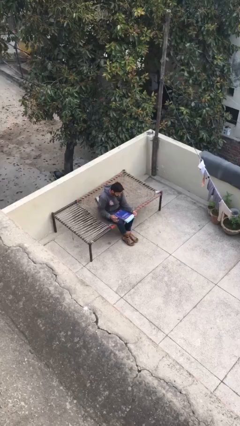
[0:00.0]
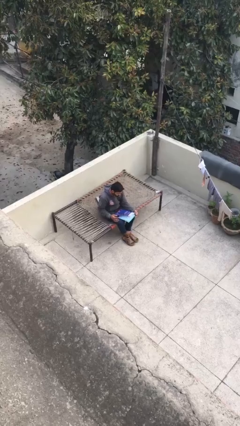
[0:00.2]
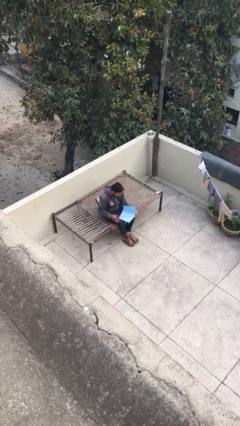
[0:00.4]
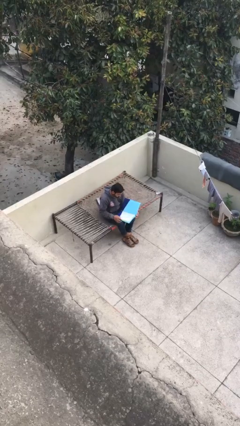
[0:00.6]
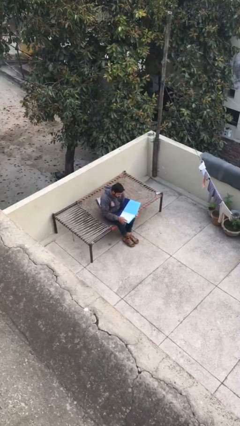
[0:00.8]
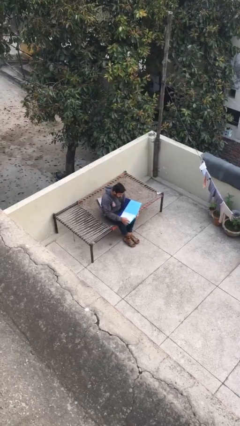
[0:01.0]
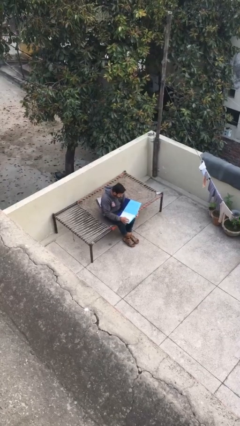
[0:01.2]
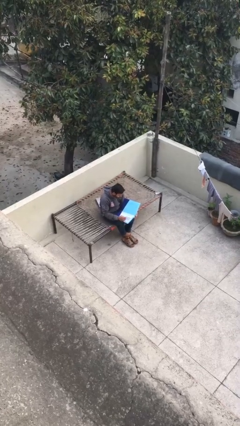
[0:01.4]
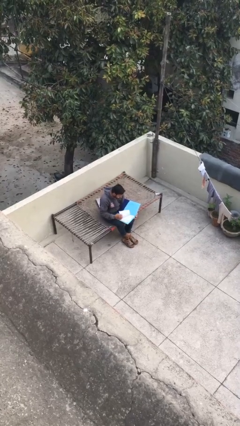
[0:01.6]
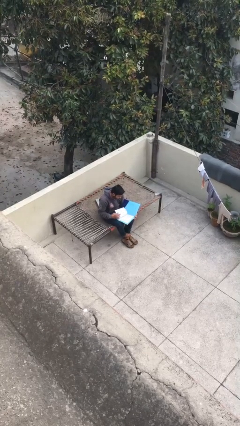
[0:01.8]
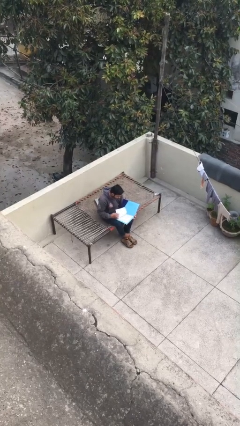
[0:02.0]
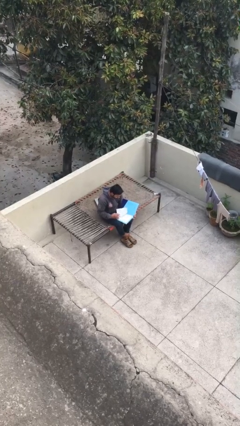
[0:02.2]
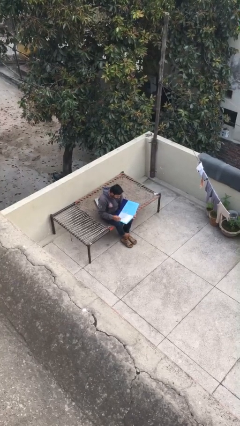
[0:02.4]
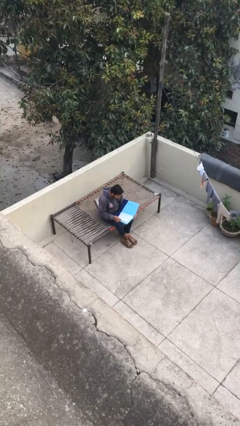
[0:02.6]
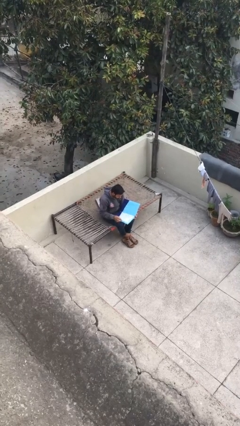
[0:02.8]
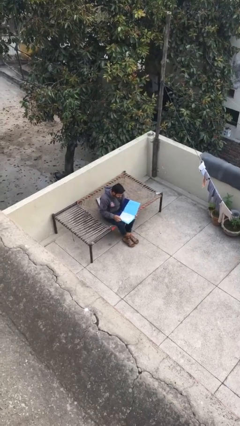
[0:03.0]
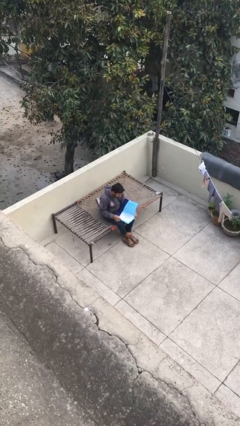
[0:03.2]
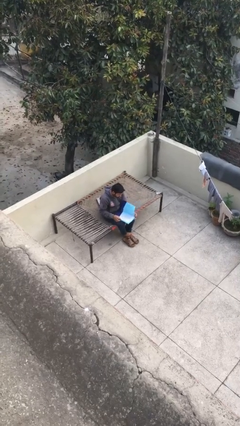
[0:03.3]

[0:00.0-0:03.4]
person reads document

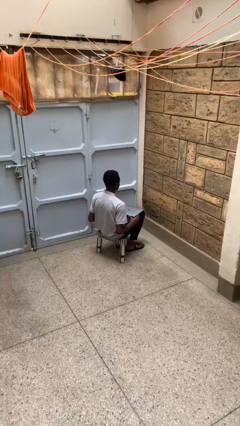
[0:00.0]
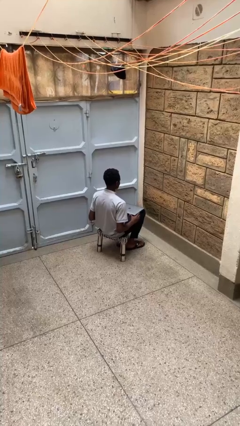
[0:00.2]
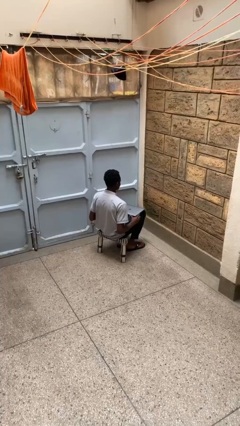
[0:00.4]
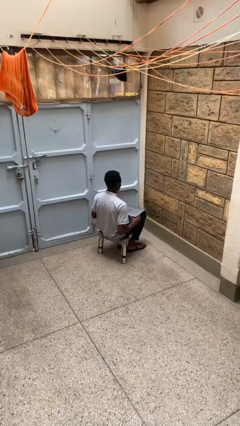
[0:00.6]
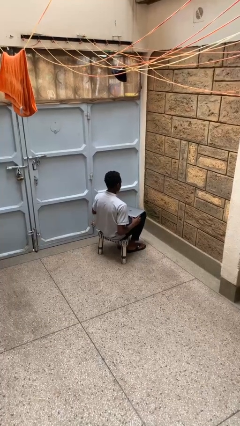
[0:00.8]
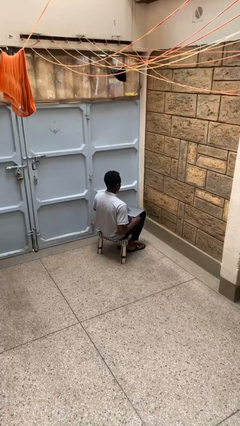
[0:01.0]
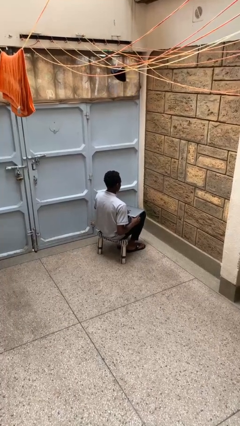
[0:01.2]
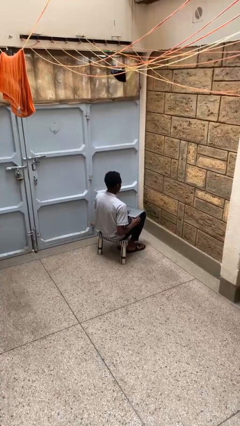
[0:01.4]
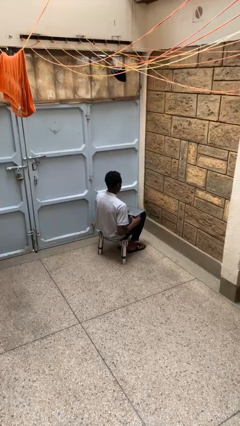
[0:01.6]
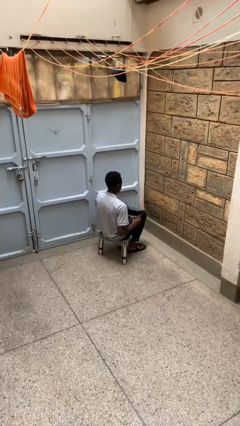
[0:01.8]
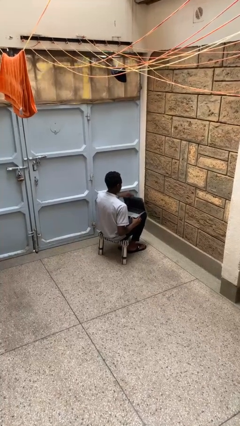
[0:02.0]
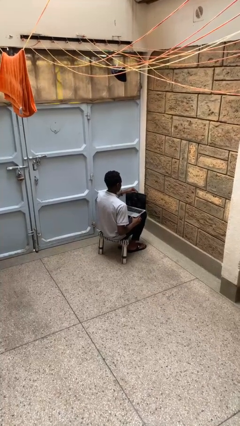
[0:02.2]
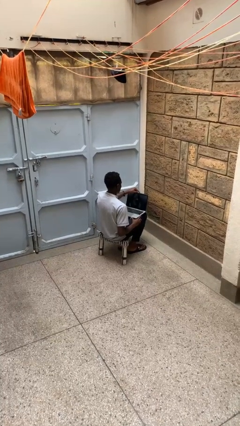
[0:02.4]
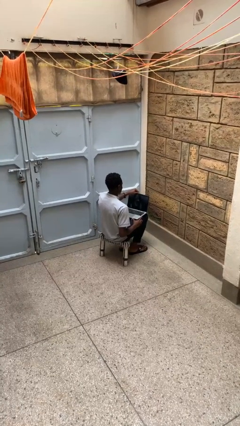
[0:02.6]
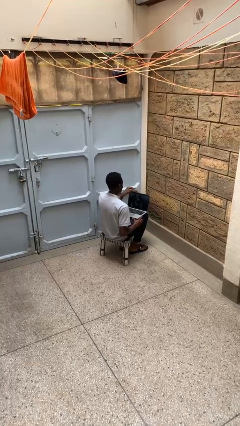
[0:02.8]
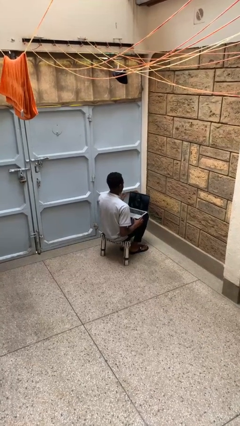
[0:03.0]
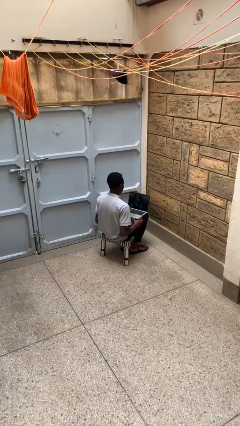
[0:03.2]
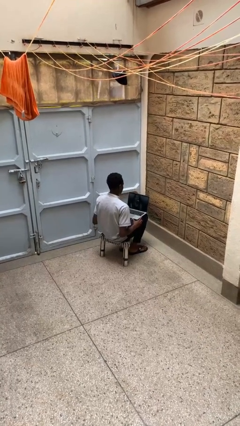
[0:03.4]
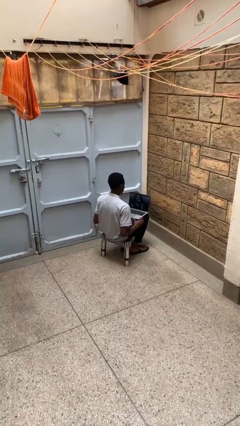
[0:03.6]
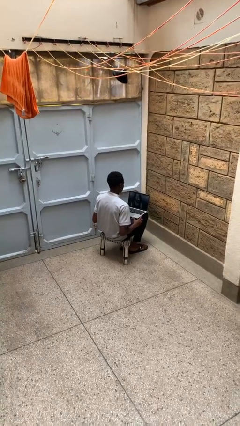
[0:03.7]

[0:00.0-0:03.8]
person opens laptop

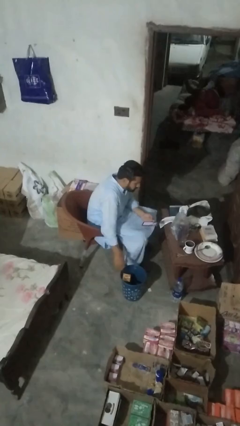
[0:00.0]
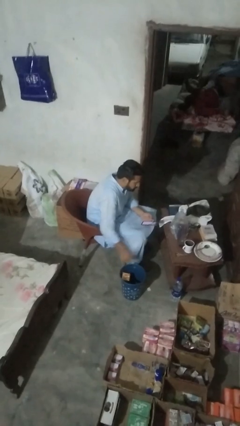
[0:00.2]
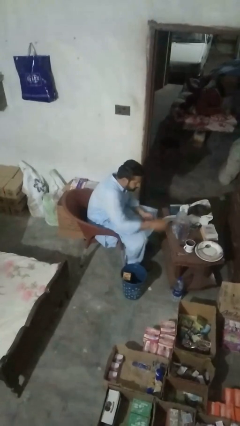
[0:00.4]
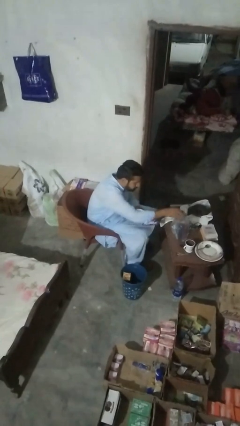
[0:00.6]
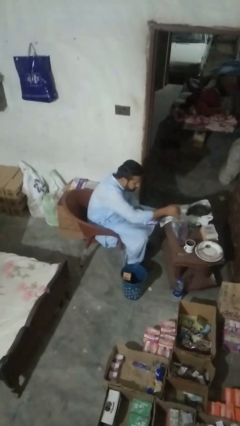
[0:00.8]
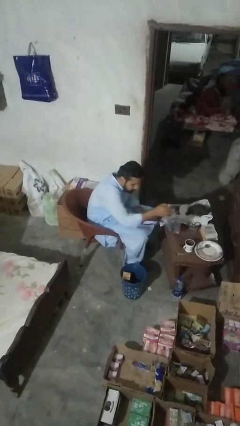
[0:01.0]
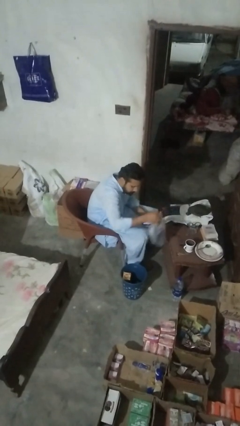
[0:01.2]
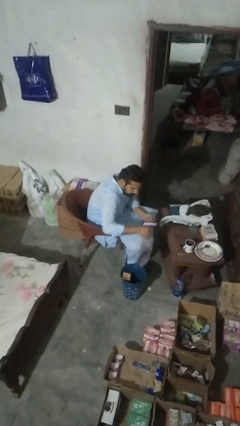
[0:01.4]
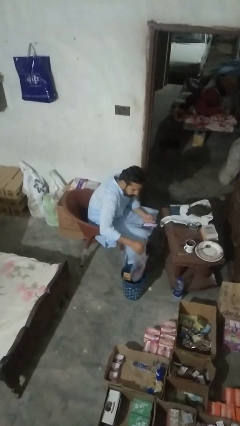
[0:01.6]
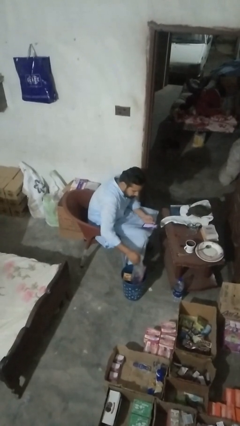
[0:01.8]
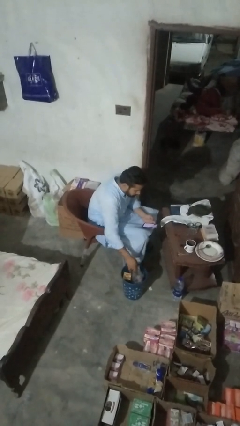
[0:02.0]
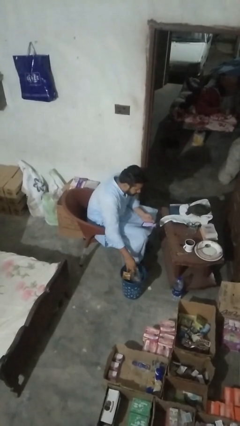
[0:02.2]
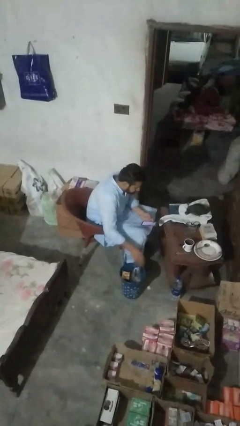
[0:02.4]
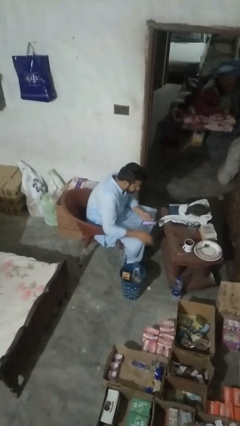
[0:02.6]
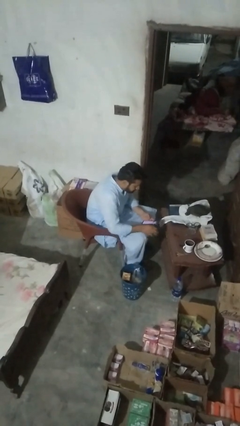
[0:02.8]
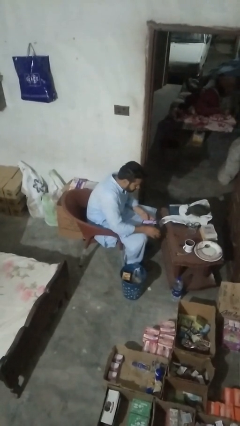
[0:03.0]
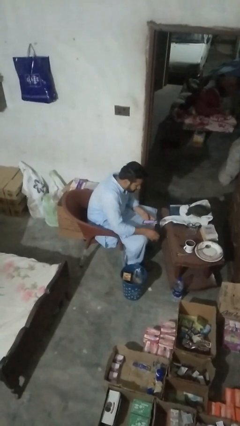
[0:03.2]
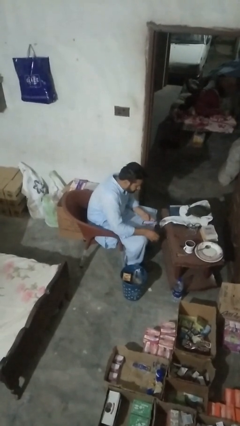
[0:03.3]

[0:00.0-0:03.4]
person removes trashbag from trashcan

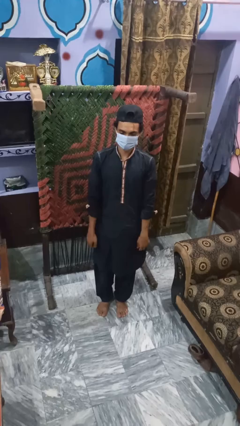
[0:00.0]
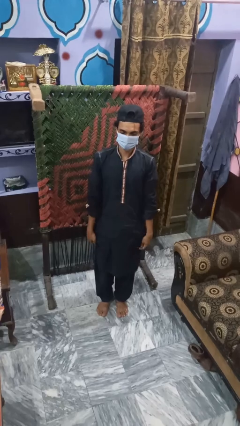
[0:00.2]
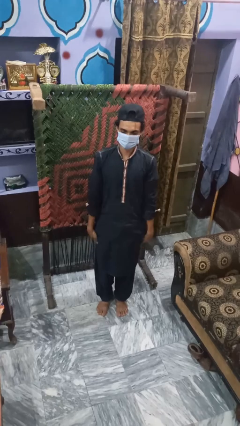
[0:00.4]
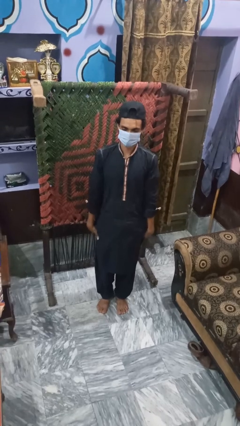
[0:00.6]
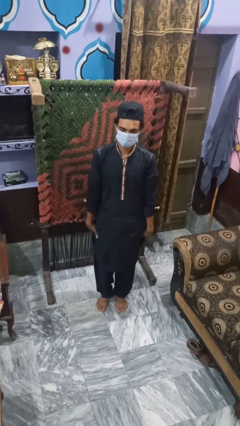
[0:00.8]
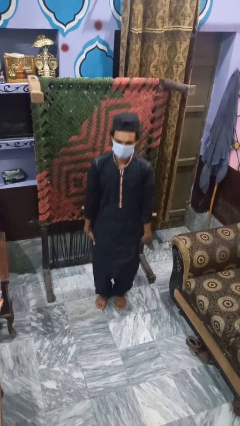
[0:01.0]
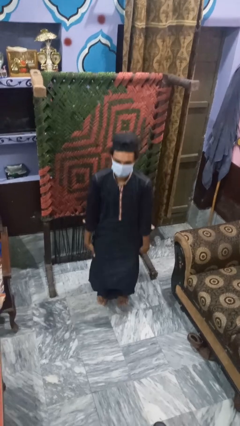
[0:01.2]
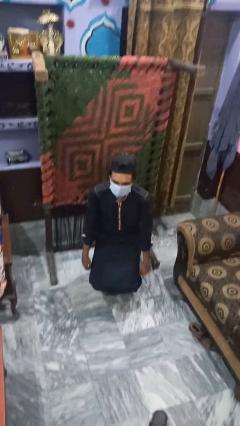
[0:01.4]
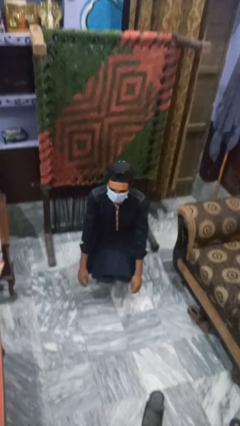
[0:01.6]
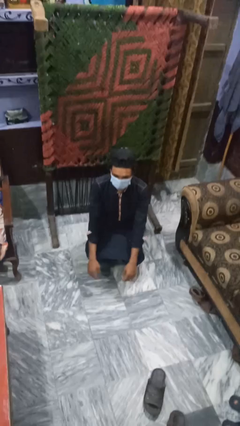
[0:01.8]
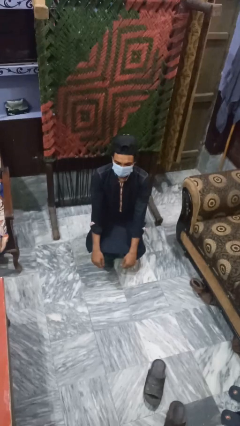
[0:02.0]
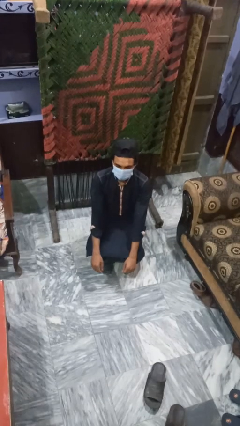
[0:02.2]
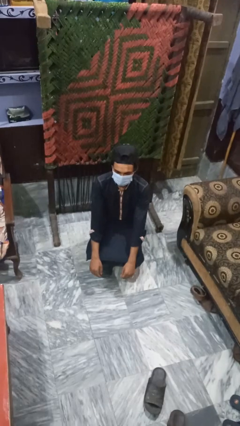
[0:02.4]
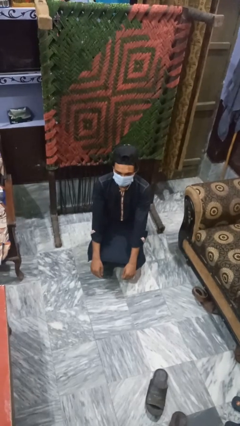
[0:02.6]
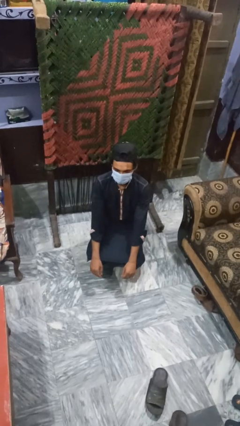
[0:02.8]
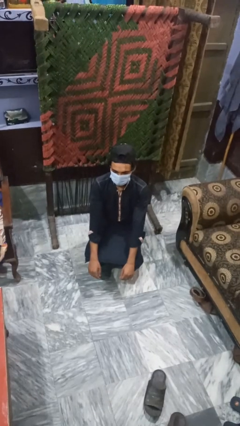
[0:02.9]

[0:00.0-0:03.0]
person squats

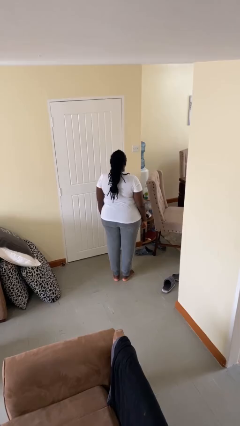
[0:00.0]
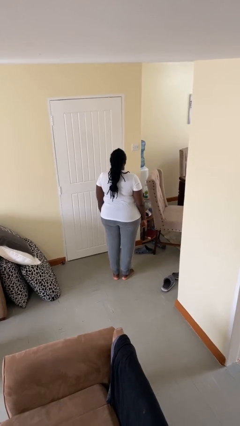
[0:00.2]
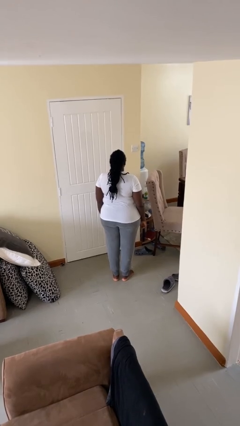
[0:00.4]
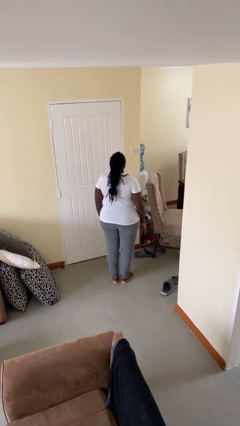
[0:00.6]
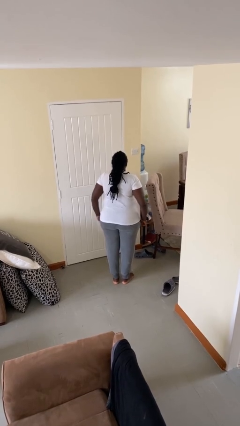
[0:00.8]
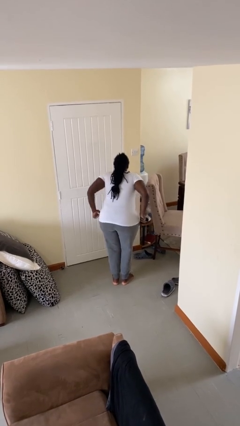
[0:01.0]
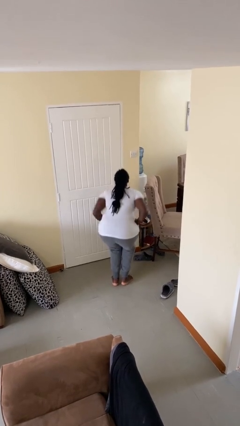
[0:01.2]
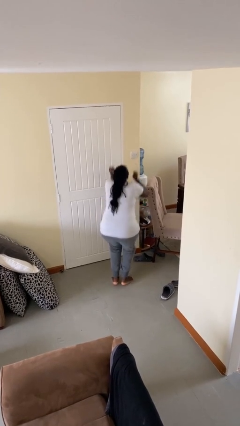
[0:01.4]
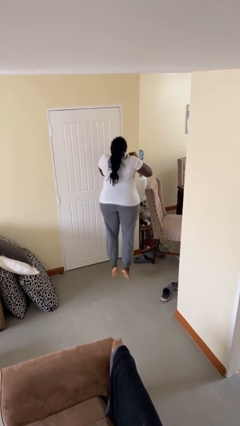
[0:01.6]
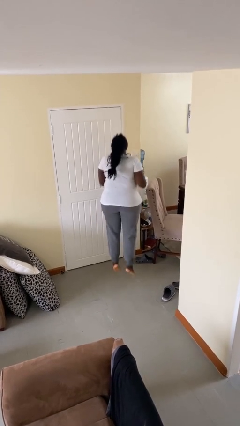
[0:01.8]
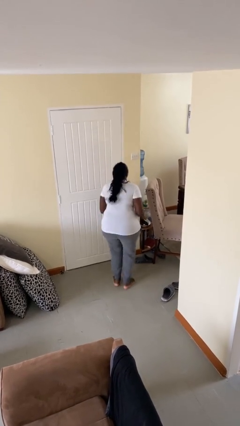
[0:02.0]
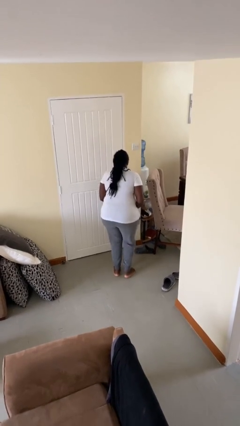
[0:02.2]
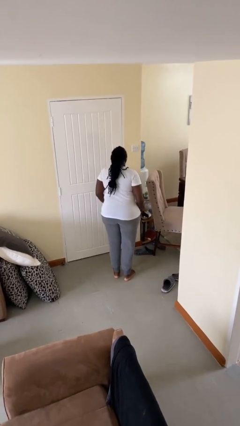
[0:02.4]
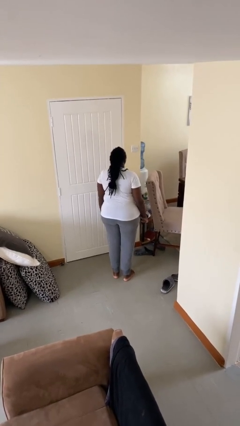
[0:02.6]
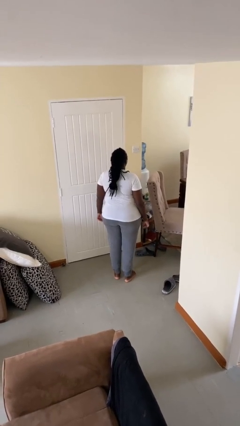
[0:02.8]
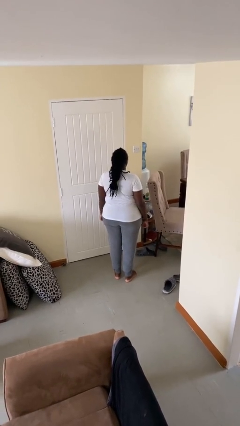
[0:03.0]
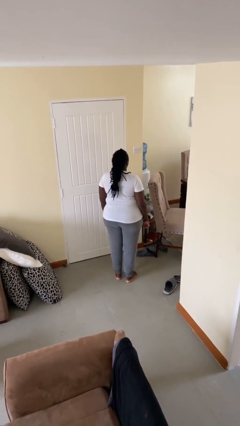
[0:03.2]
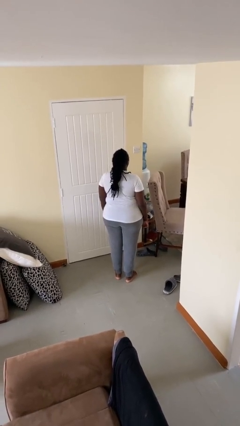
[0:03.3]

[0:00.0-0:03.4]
person jumps

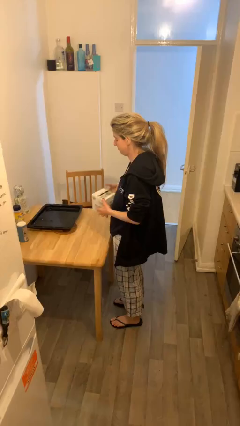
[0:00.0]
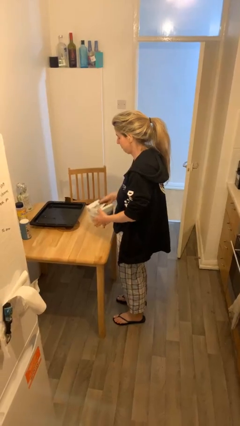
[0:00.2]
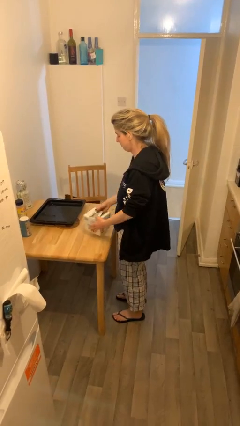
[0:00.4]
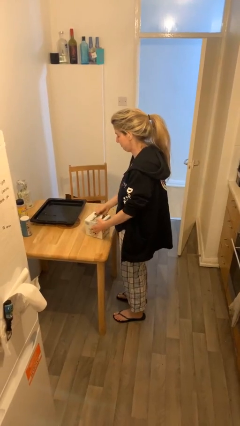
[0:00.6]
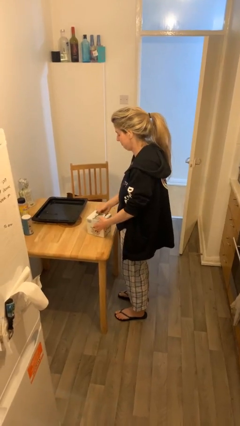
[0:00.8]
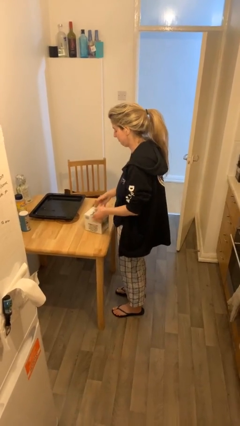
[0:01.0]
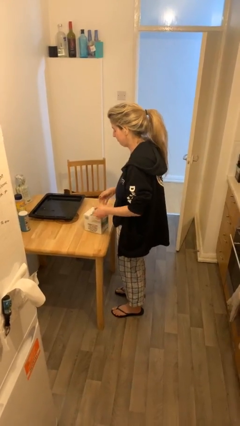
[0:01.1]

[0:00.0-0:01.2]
person puts down object on table
